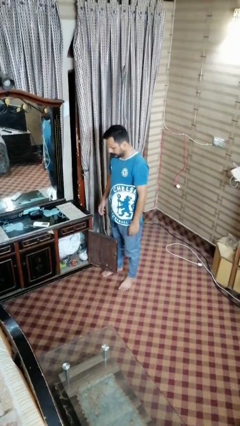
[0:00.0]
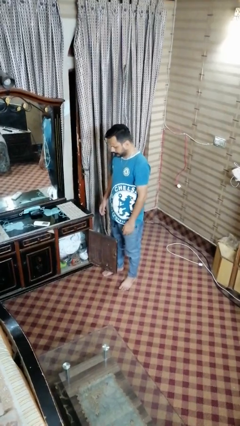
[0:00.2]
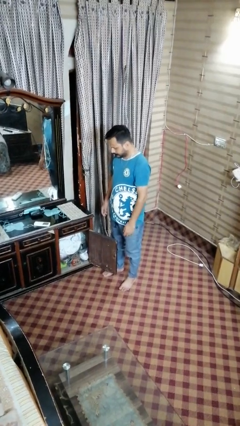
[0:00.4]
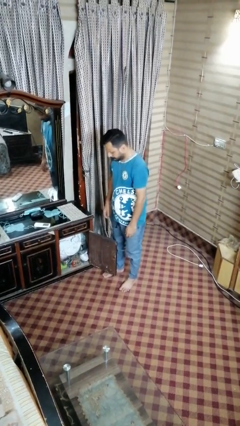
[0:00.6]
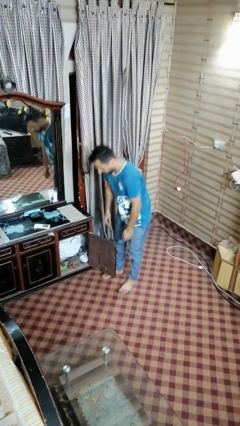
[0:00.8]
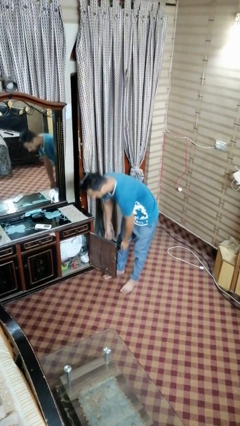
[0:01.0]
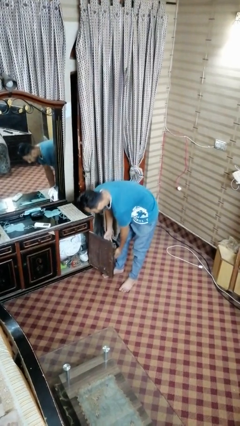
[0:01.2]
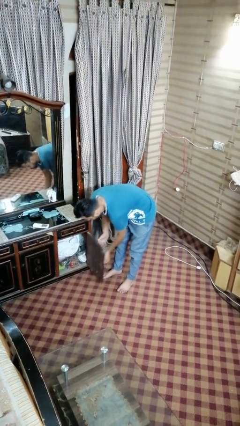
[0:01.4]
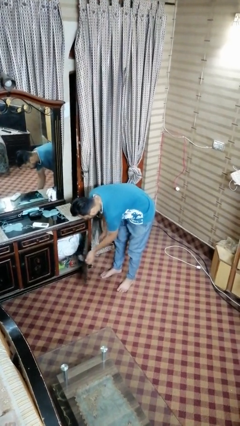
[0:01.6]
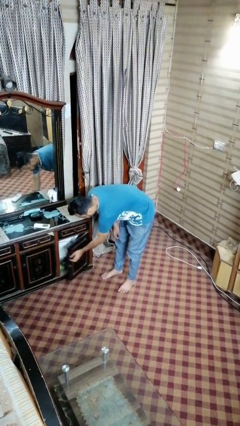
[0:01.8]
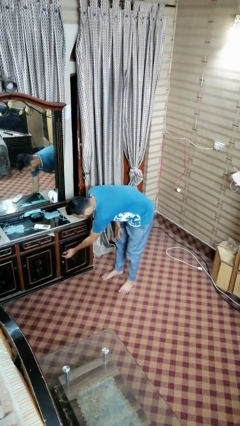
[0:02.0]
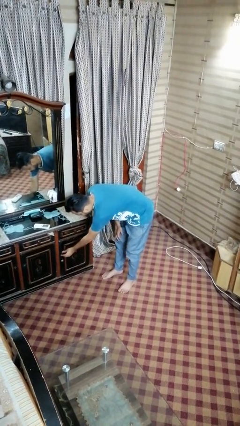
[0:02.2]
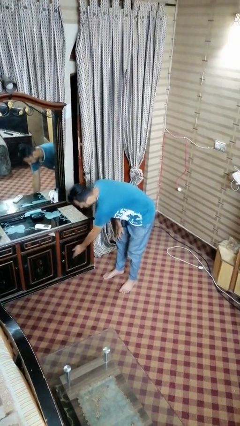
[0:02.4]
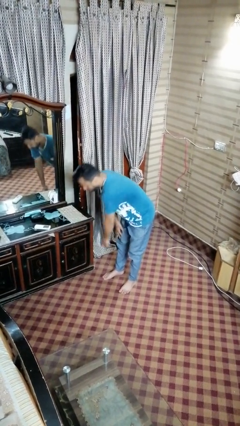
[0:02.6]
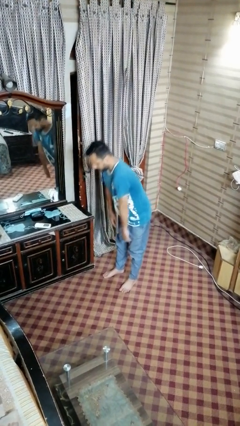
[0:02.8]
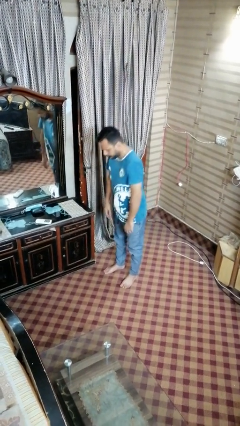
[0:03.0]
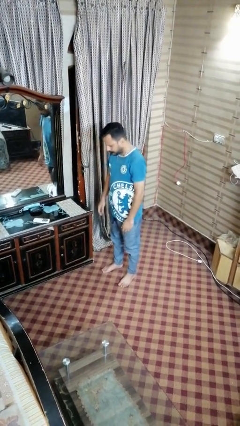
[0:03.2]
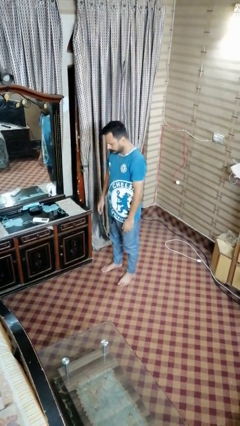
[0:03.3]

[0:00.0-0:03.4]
person closes dresser drawer

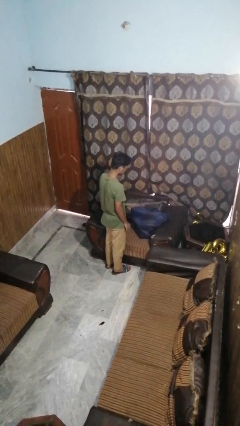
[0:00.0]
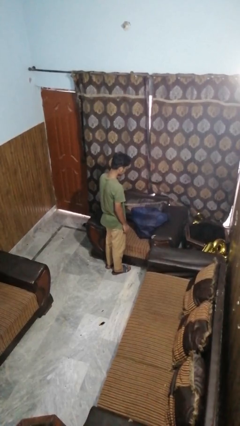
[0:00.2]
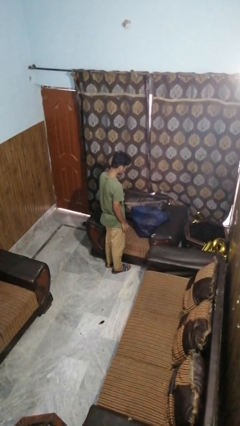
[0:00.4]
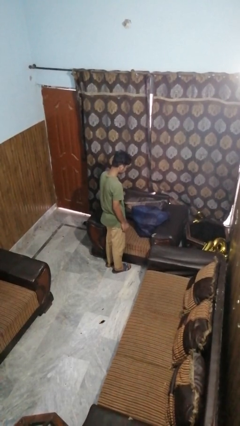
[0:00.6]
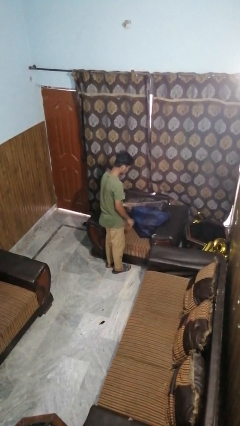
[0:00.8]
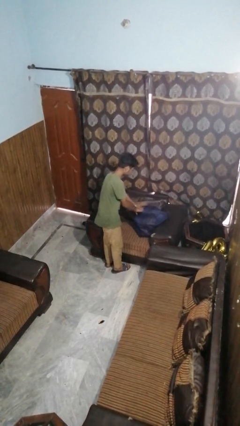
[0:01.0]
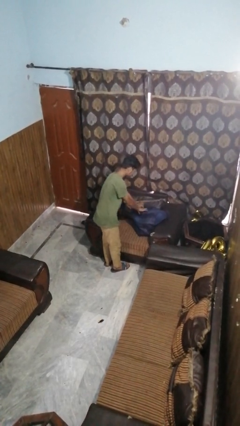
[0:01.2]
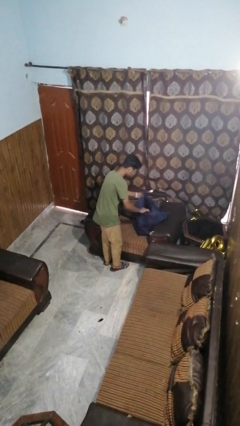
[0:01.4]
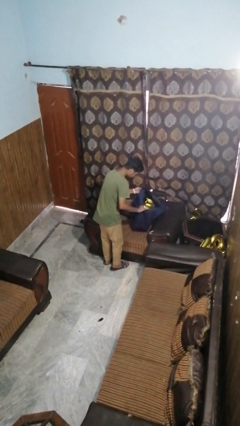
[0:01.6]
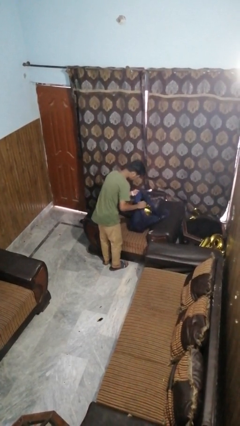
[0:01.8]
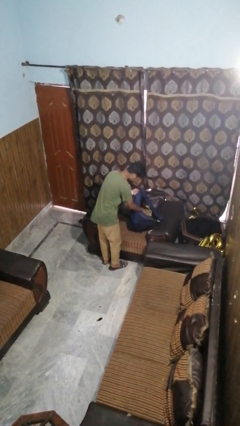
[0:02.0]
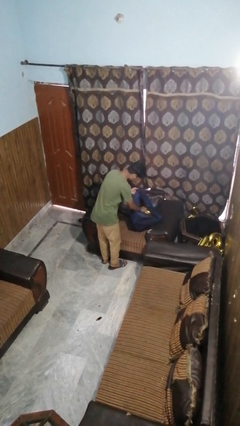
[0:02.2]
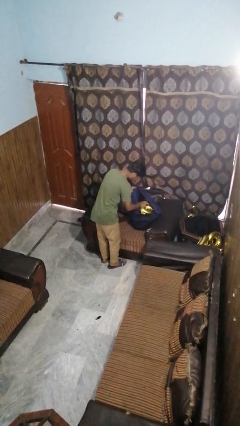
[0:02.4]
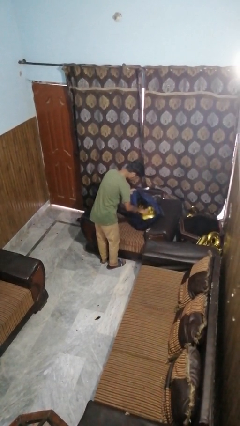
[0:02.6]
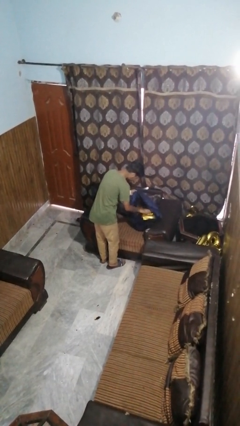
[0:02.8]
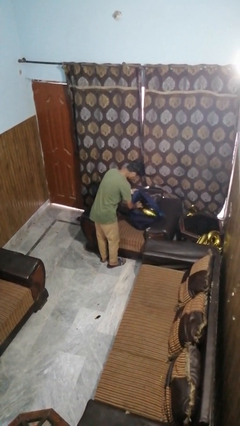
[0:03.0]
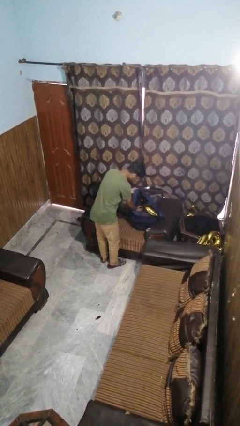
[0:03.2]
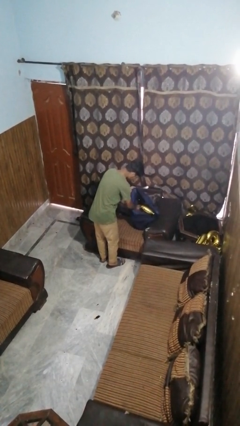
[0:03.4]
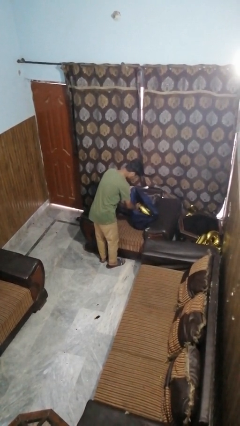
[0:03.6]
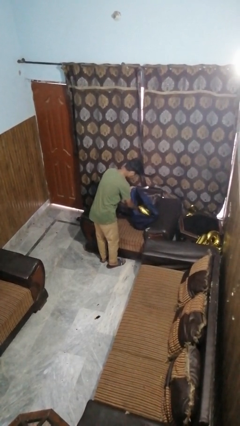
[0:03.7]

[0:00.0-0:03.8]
person searches in bag

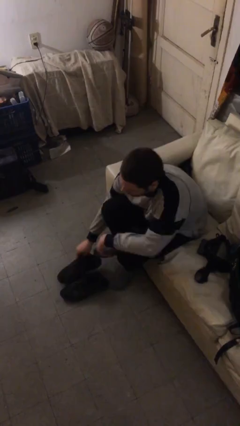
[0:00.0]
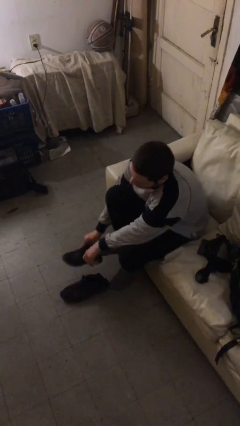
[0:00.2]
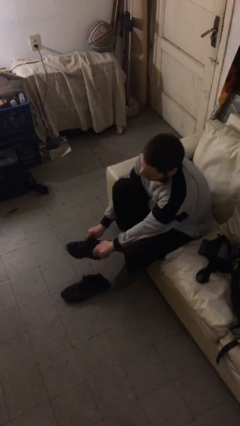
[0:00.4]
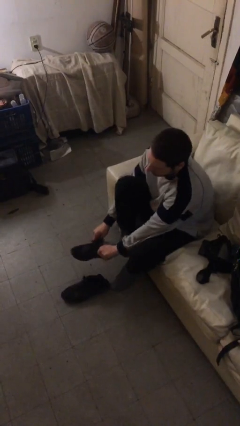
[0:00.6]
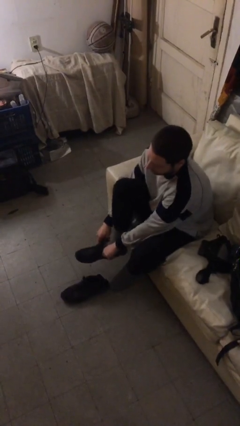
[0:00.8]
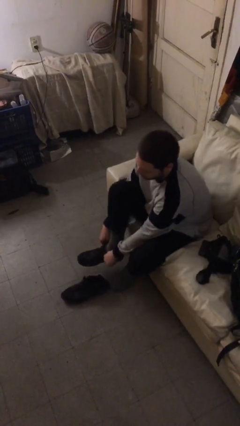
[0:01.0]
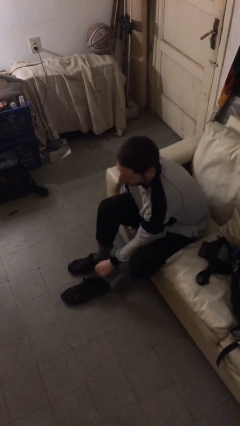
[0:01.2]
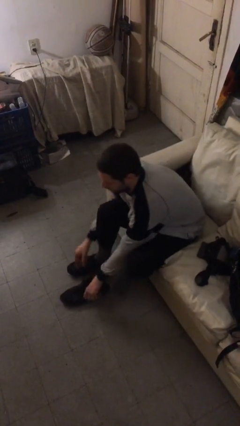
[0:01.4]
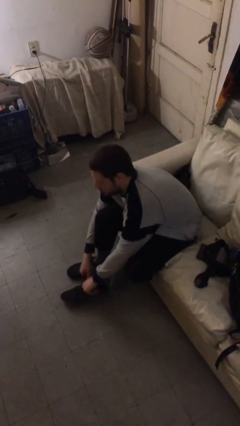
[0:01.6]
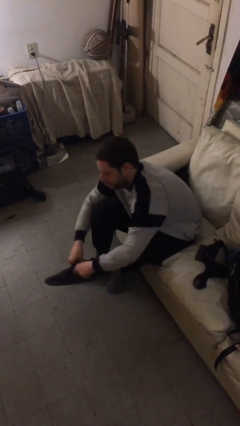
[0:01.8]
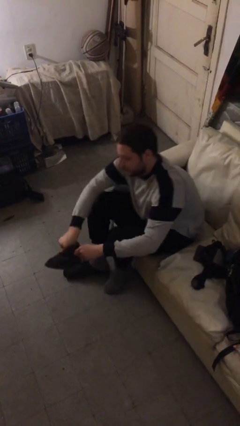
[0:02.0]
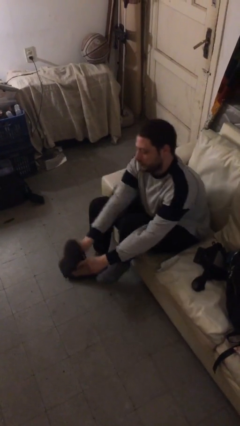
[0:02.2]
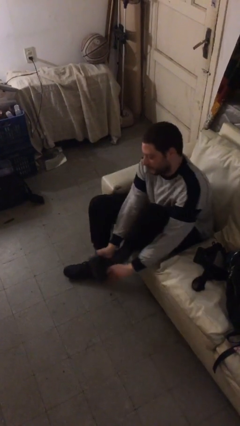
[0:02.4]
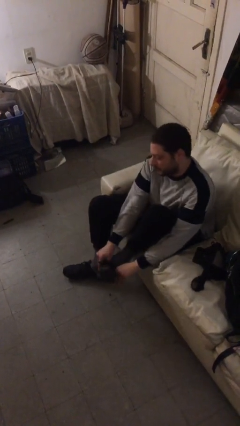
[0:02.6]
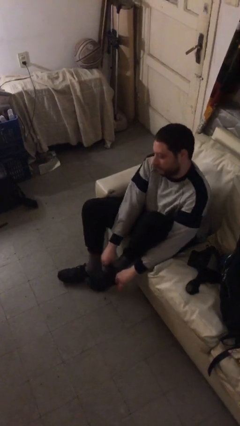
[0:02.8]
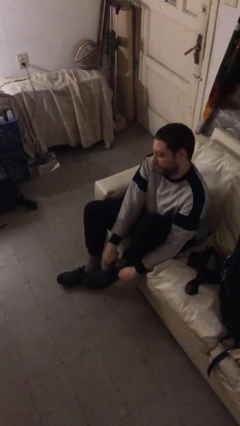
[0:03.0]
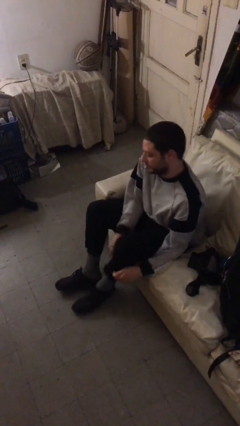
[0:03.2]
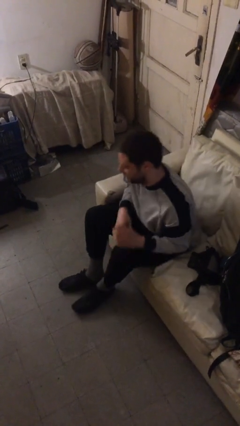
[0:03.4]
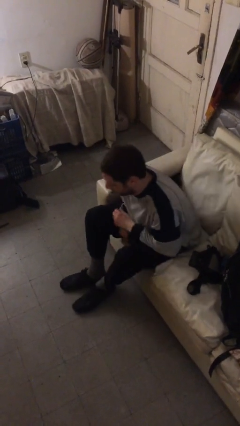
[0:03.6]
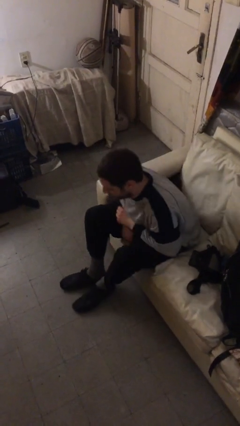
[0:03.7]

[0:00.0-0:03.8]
person puts on shoes

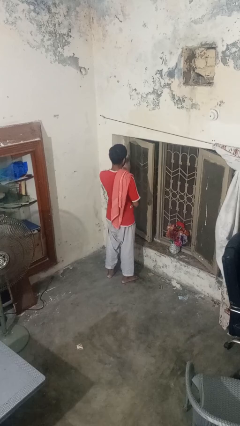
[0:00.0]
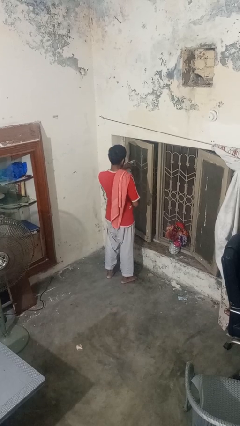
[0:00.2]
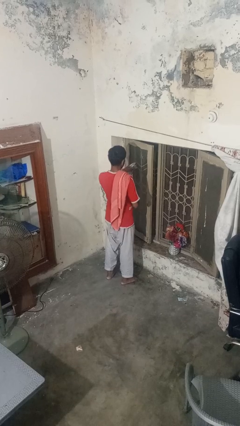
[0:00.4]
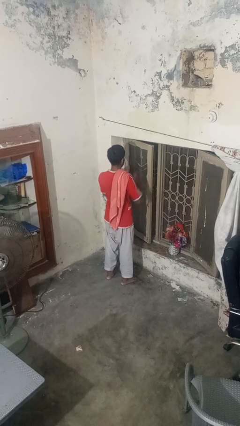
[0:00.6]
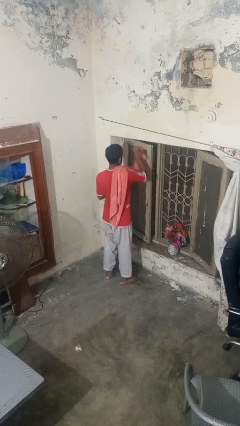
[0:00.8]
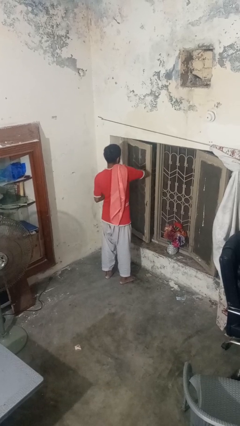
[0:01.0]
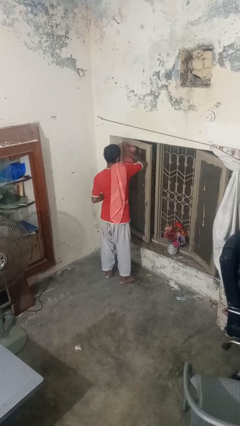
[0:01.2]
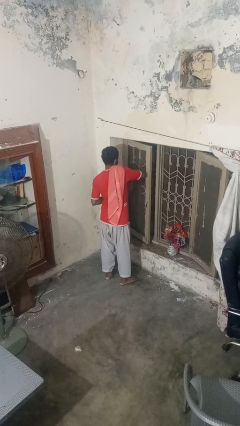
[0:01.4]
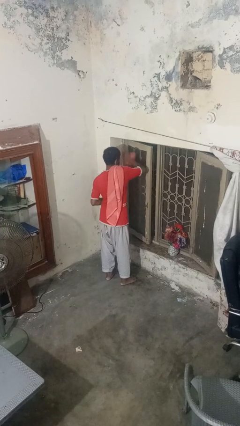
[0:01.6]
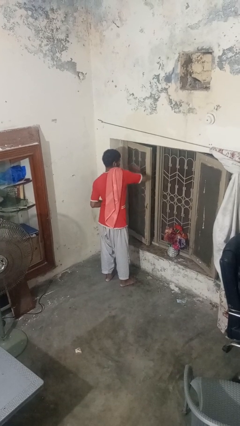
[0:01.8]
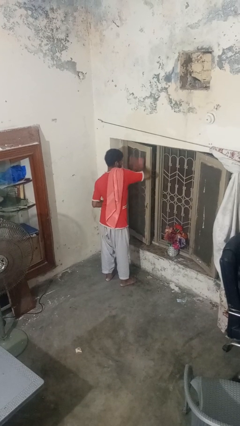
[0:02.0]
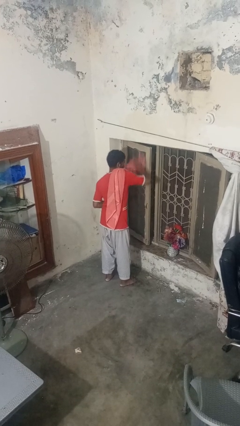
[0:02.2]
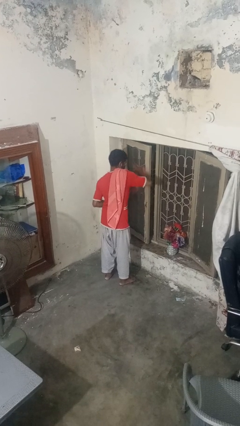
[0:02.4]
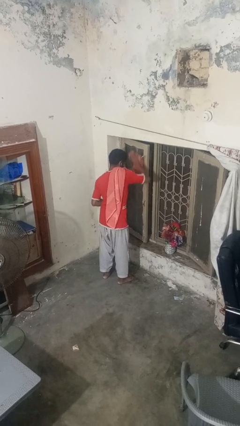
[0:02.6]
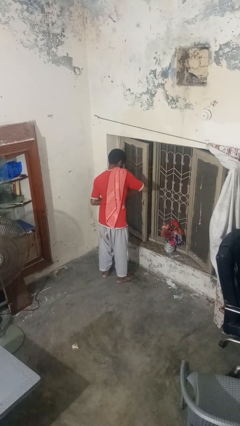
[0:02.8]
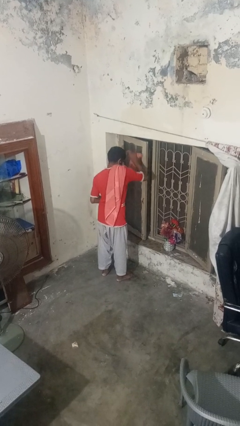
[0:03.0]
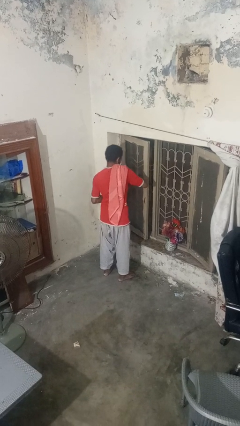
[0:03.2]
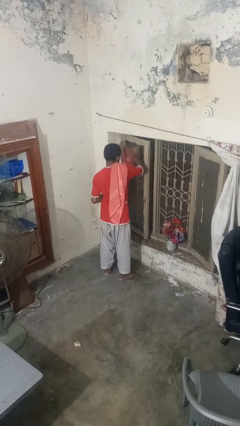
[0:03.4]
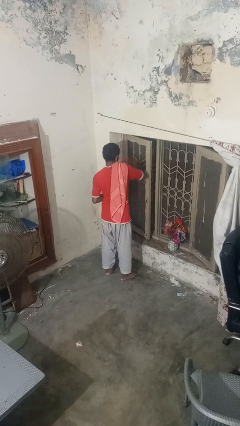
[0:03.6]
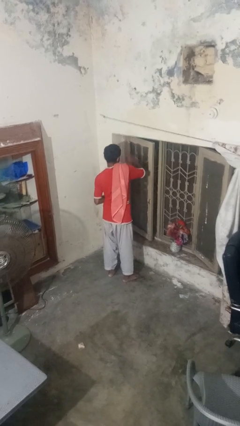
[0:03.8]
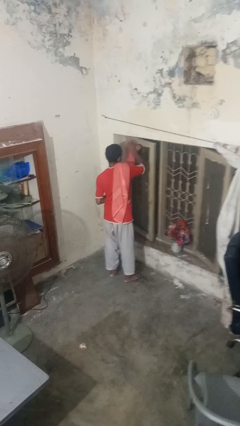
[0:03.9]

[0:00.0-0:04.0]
person washes window

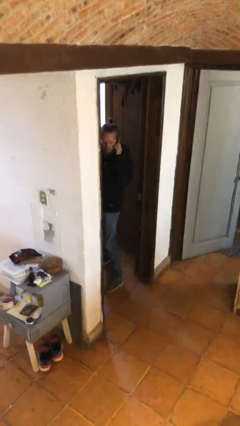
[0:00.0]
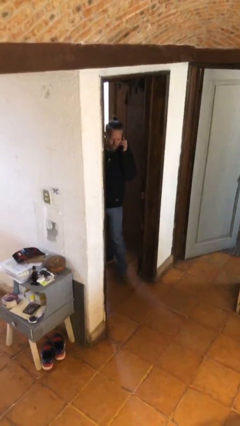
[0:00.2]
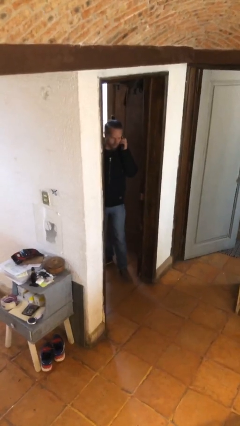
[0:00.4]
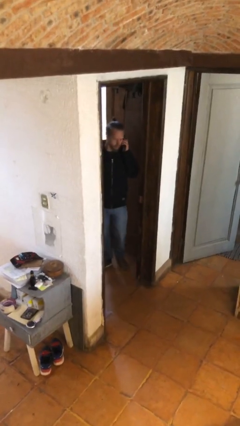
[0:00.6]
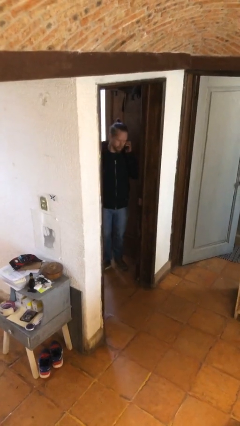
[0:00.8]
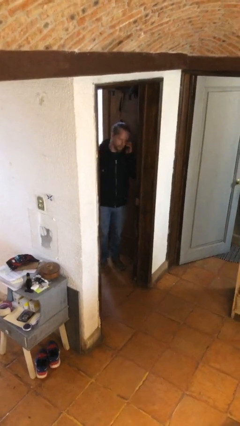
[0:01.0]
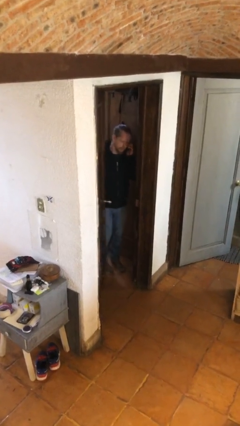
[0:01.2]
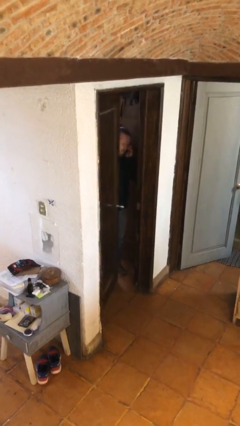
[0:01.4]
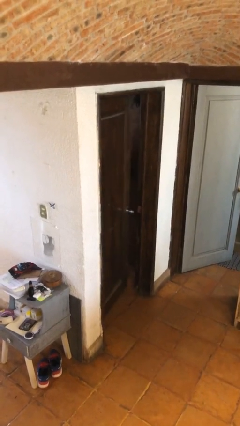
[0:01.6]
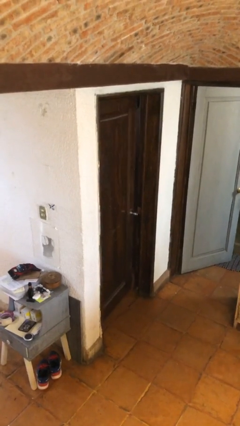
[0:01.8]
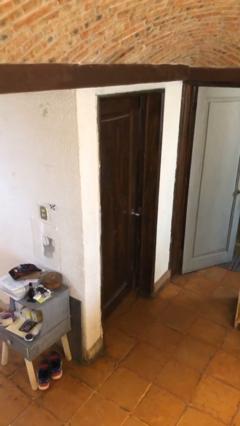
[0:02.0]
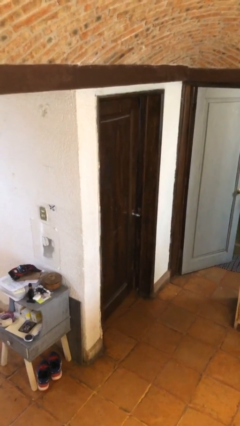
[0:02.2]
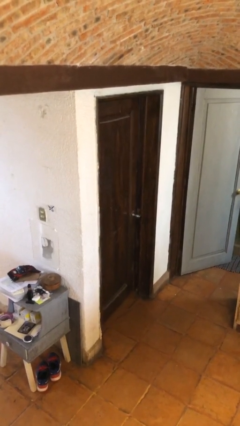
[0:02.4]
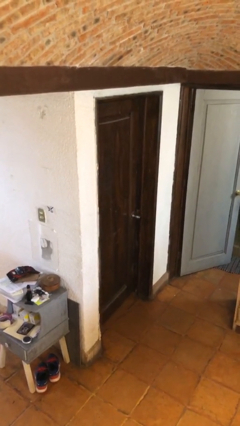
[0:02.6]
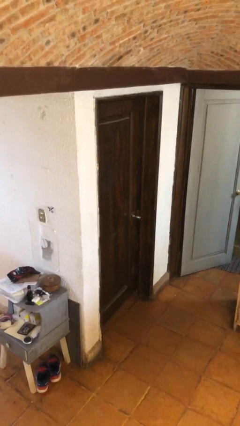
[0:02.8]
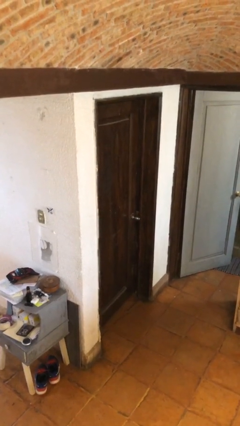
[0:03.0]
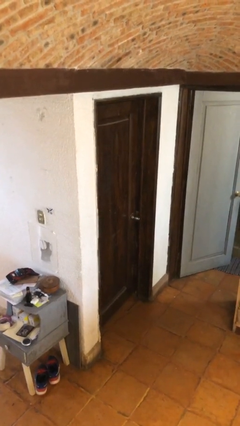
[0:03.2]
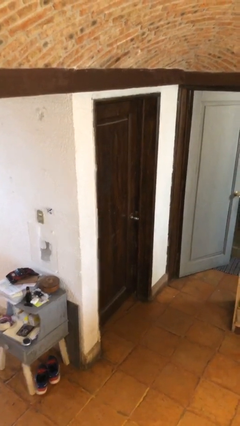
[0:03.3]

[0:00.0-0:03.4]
person closes facility door
